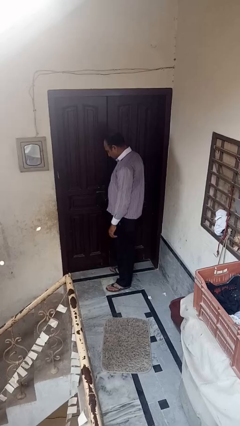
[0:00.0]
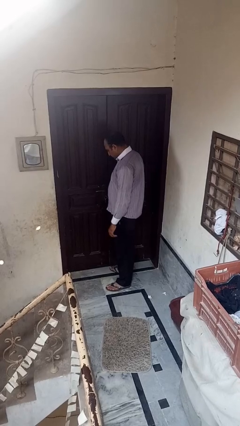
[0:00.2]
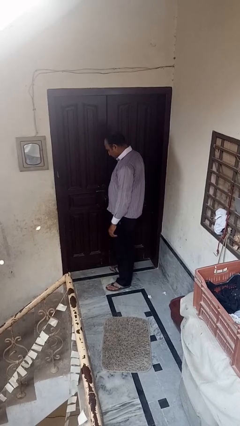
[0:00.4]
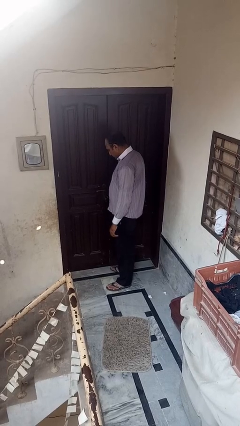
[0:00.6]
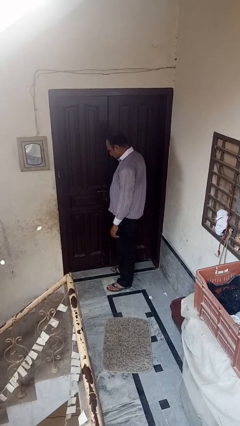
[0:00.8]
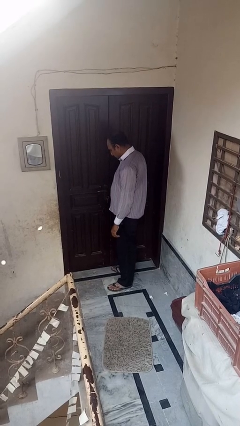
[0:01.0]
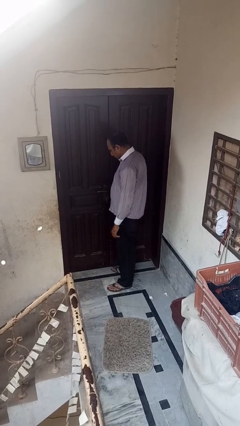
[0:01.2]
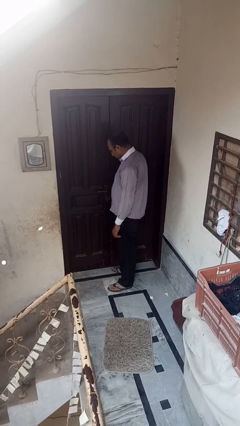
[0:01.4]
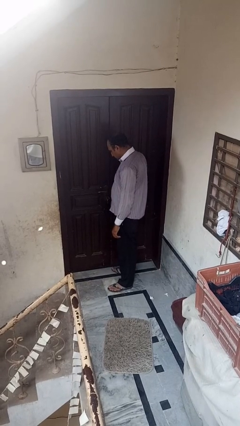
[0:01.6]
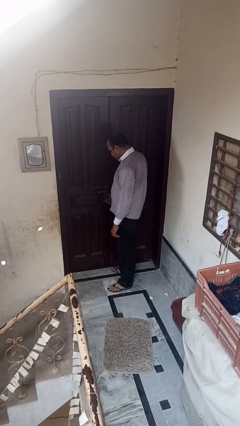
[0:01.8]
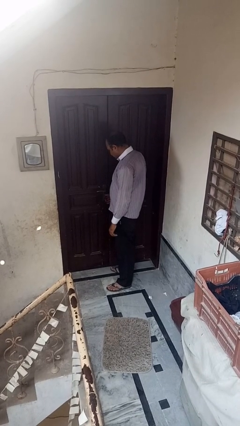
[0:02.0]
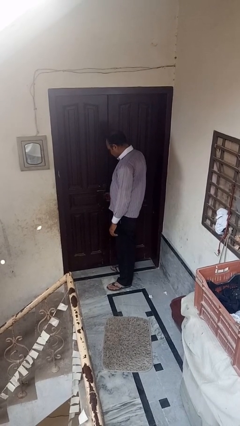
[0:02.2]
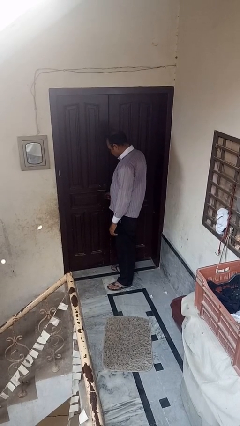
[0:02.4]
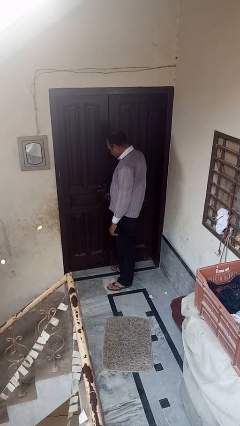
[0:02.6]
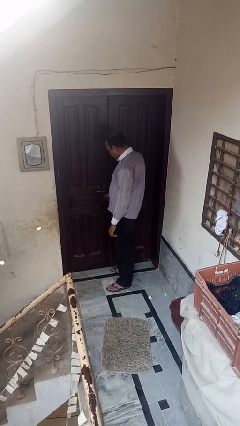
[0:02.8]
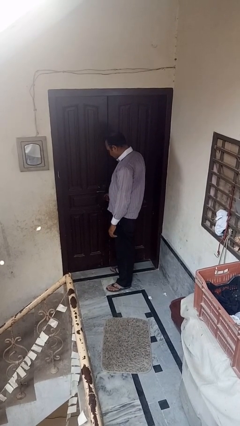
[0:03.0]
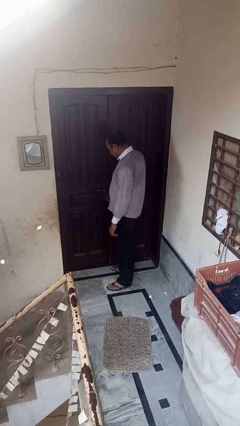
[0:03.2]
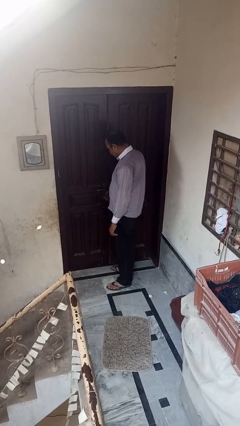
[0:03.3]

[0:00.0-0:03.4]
person unlocks door with keys

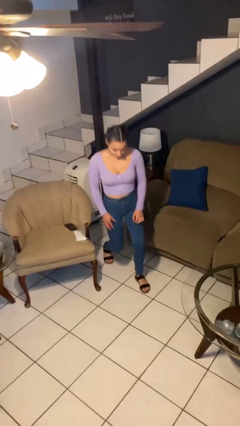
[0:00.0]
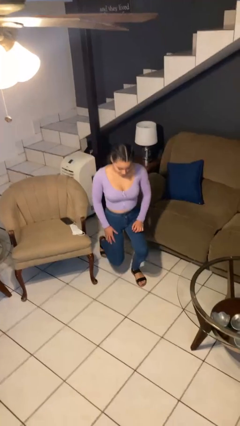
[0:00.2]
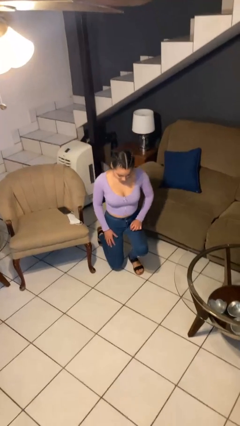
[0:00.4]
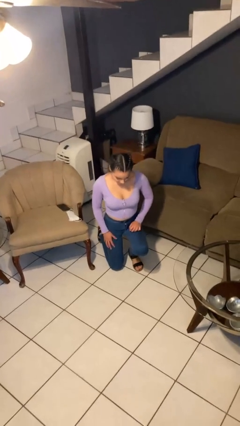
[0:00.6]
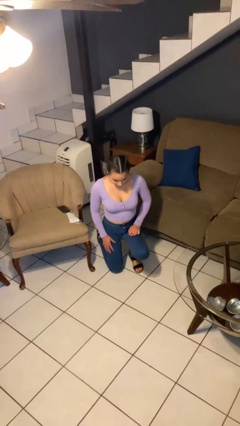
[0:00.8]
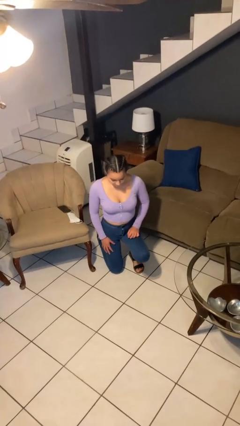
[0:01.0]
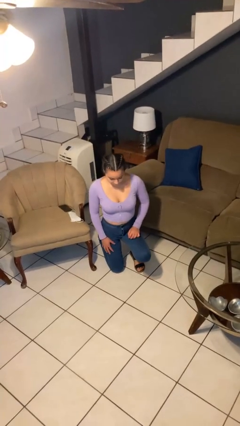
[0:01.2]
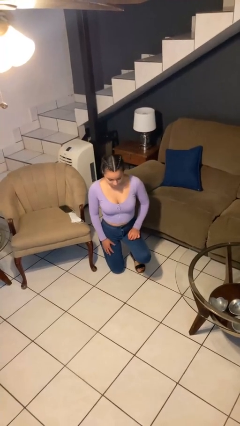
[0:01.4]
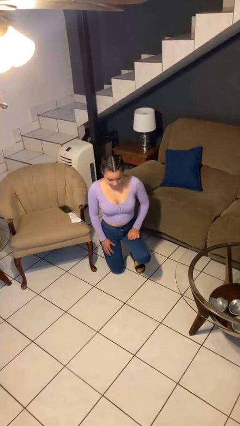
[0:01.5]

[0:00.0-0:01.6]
person kneels

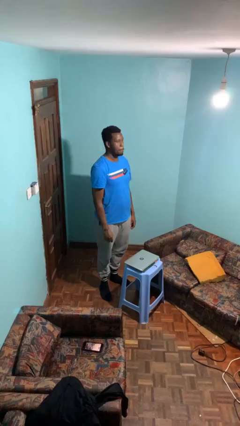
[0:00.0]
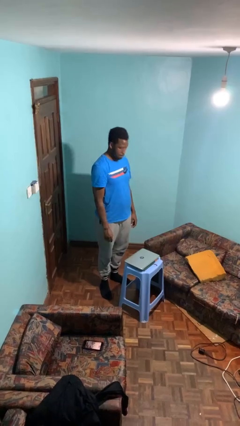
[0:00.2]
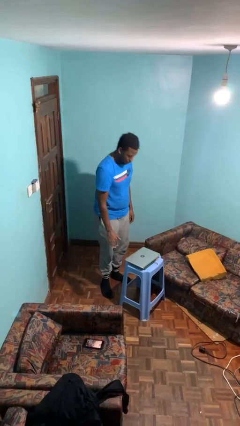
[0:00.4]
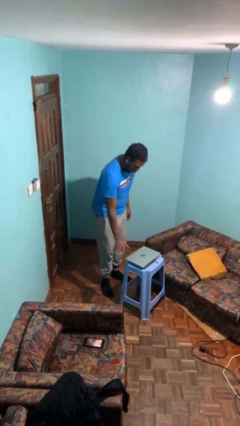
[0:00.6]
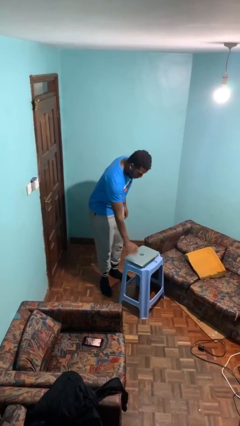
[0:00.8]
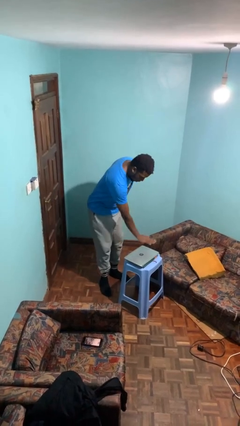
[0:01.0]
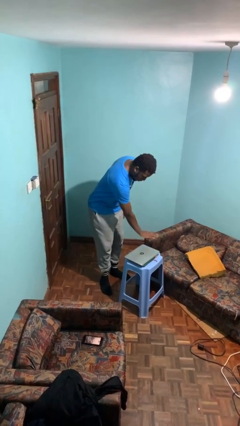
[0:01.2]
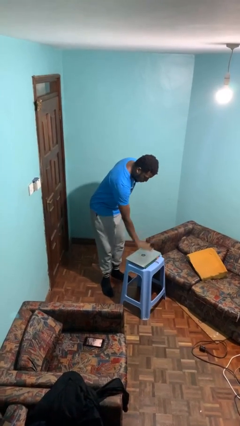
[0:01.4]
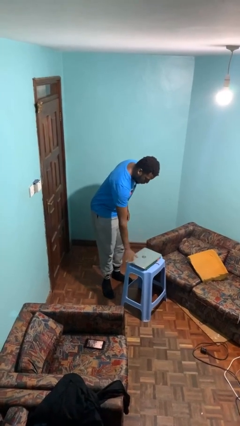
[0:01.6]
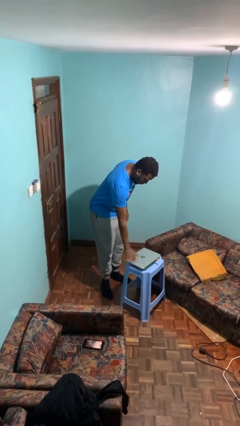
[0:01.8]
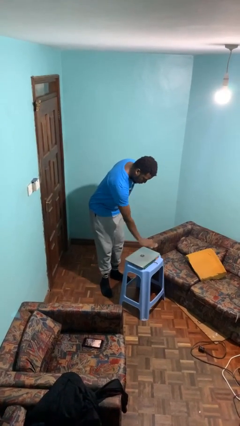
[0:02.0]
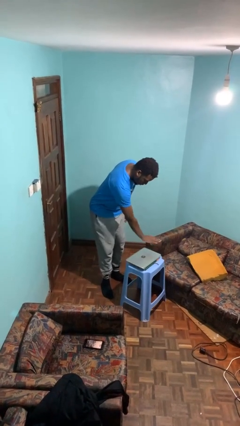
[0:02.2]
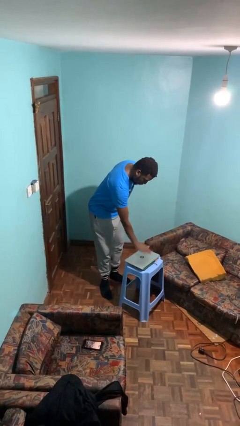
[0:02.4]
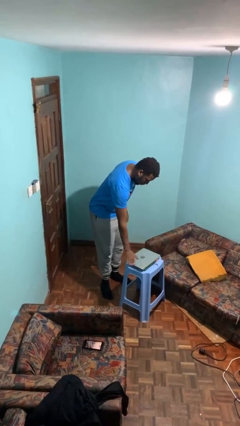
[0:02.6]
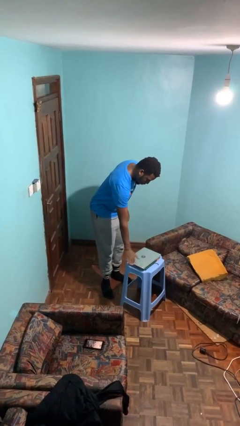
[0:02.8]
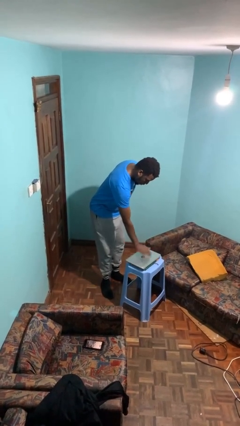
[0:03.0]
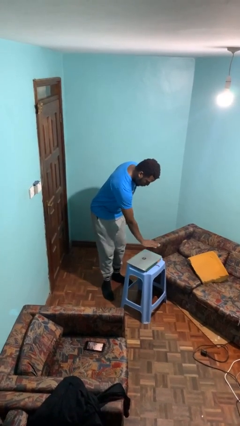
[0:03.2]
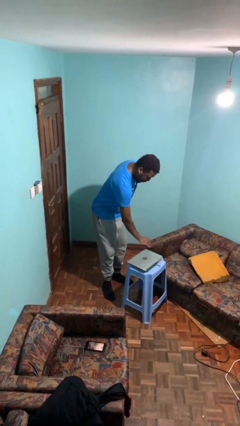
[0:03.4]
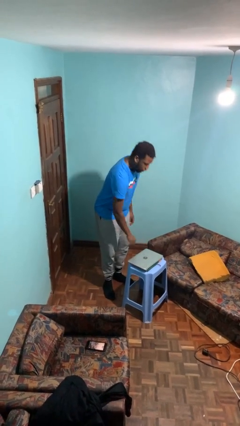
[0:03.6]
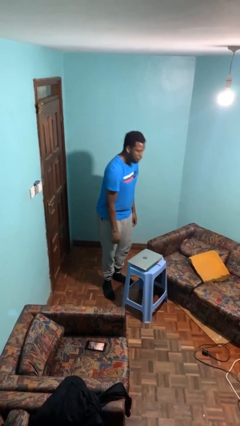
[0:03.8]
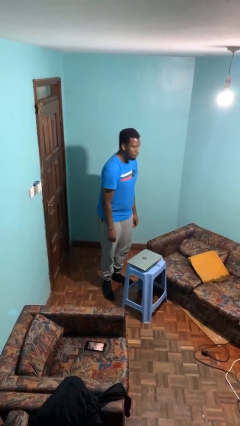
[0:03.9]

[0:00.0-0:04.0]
person waves hand over object

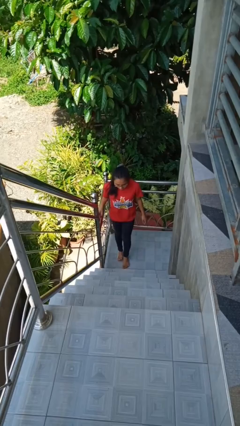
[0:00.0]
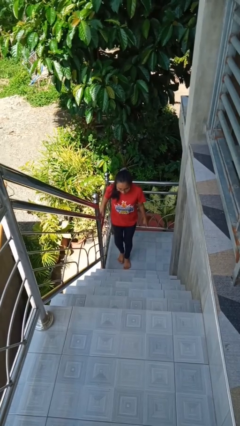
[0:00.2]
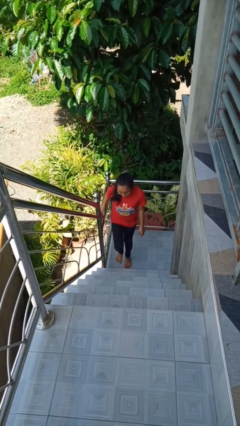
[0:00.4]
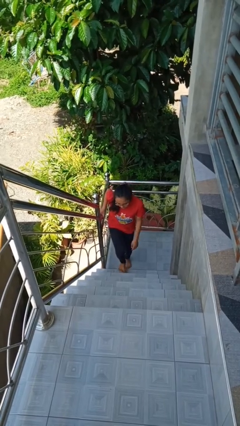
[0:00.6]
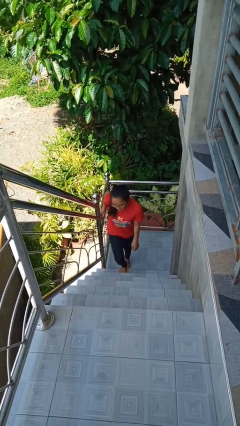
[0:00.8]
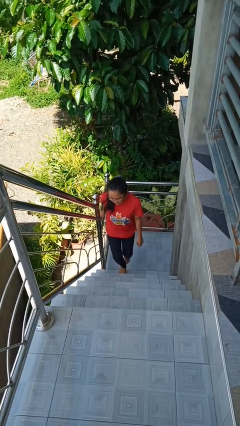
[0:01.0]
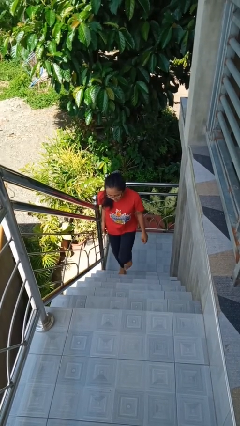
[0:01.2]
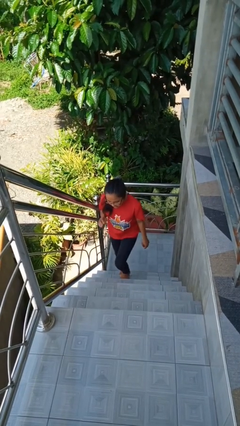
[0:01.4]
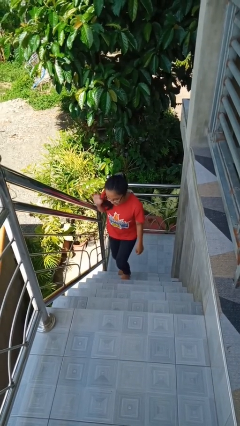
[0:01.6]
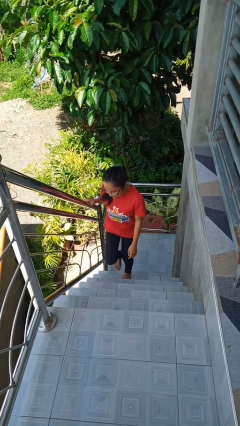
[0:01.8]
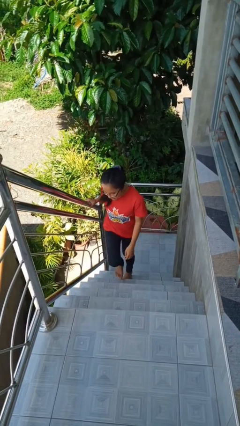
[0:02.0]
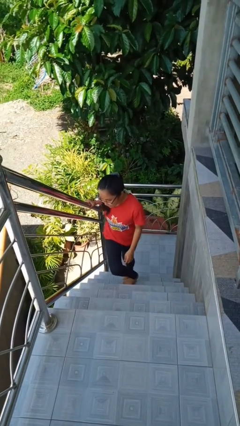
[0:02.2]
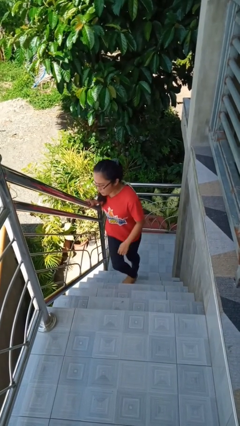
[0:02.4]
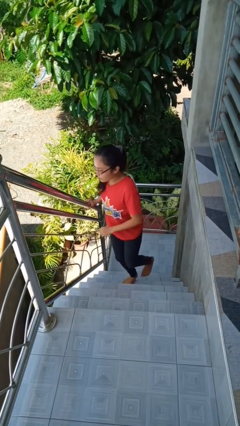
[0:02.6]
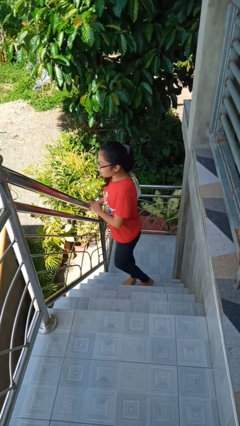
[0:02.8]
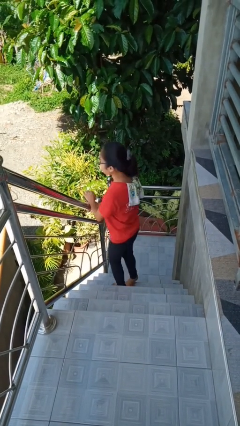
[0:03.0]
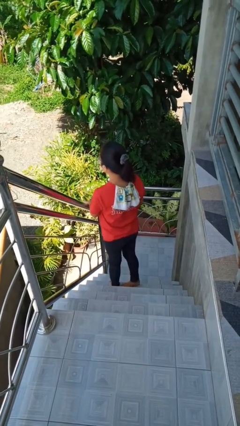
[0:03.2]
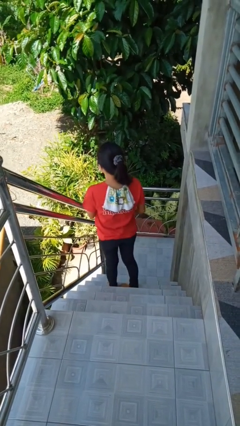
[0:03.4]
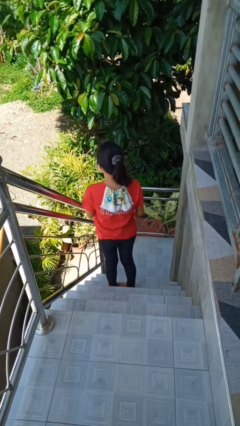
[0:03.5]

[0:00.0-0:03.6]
person climbs up stairs

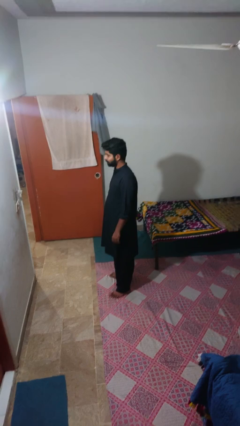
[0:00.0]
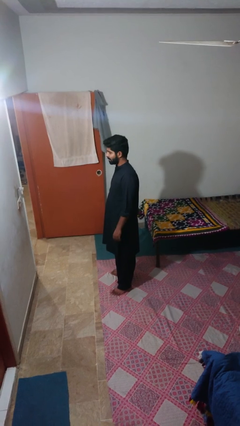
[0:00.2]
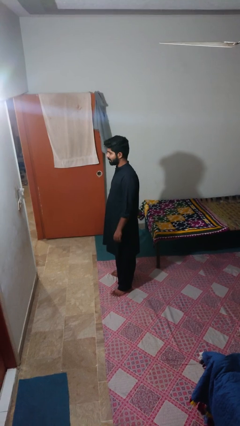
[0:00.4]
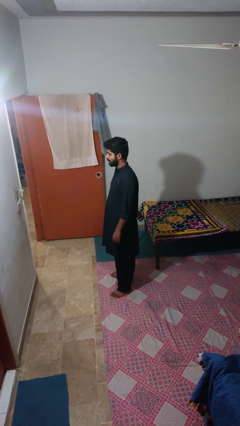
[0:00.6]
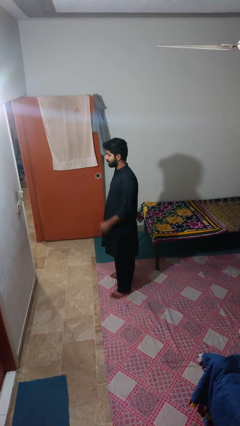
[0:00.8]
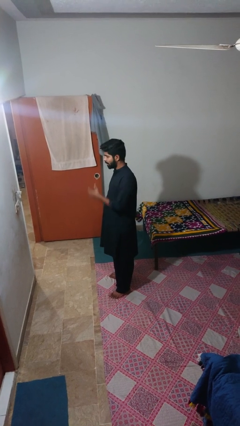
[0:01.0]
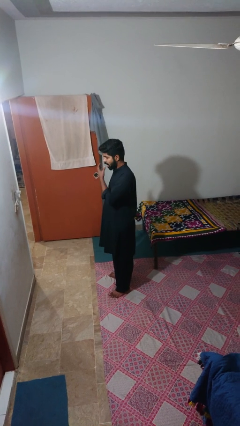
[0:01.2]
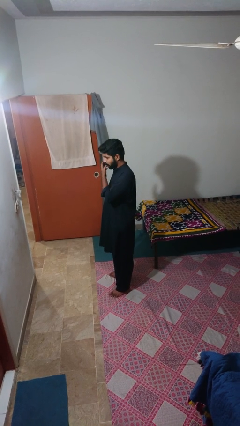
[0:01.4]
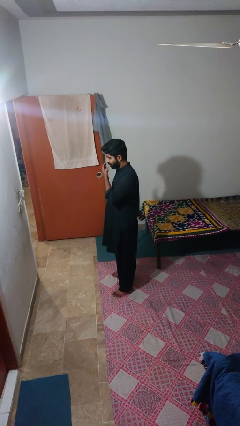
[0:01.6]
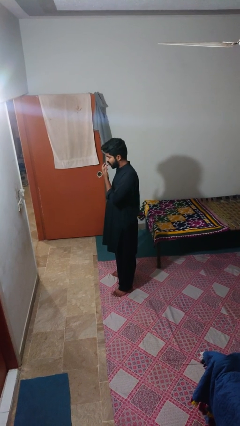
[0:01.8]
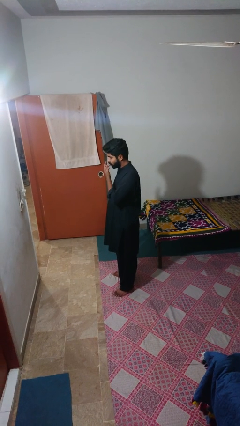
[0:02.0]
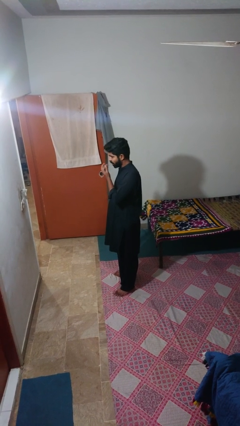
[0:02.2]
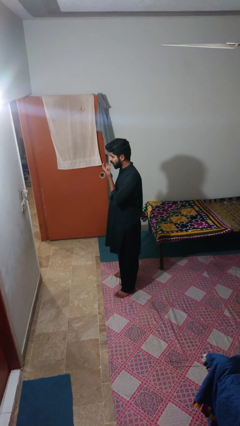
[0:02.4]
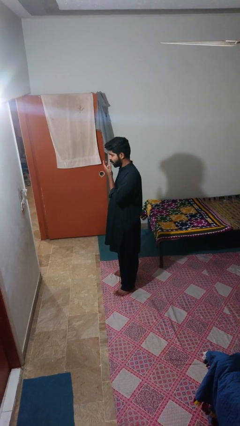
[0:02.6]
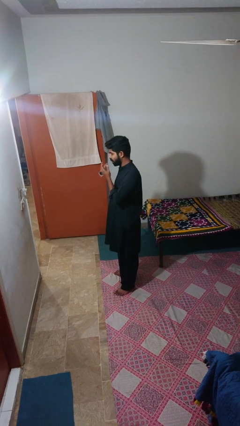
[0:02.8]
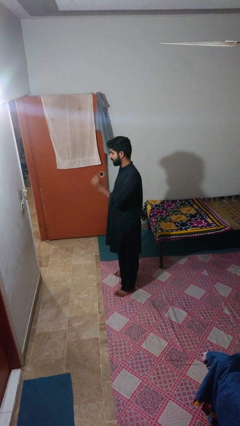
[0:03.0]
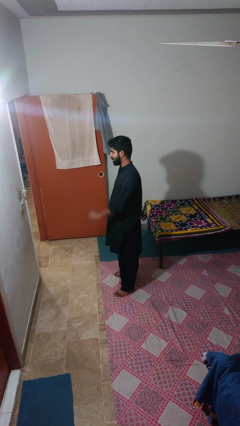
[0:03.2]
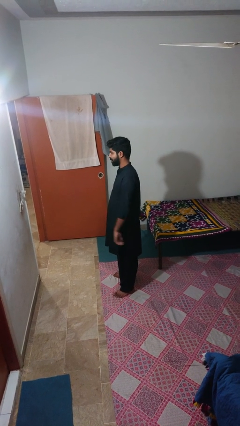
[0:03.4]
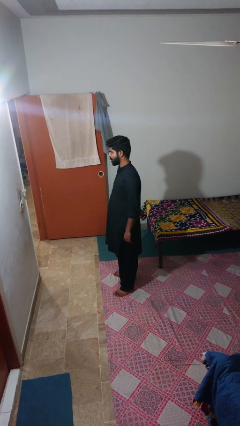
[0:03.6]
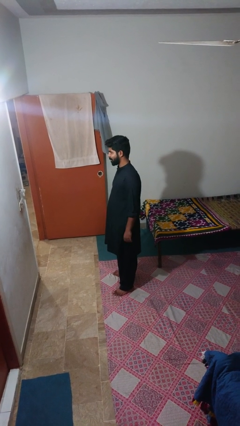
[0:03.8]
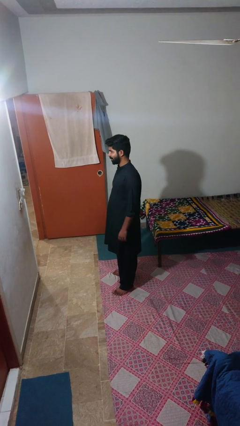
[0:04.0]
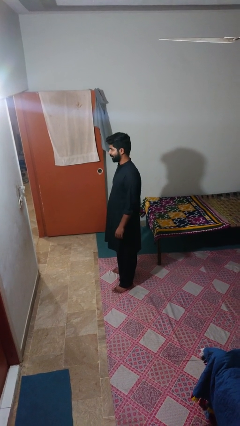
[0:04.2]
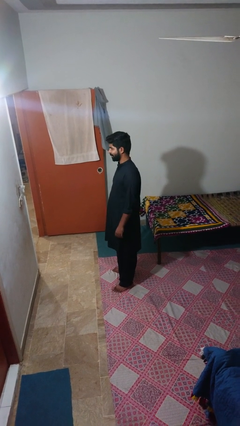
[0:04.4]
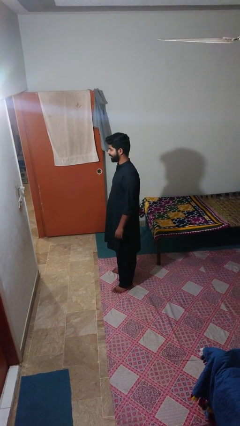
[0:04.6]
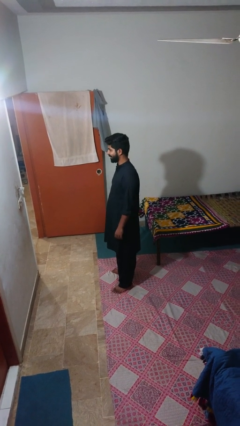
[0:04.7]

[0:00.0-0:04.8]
person licks fingers
